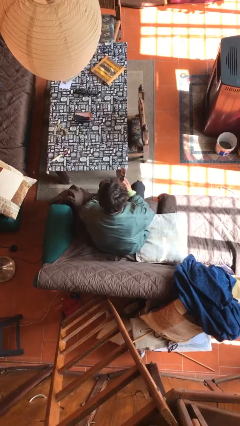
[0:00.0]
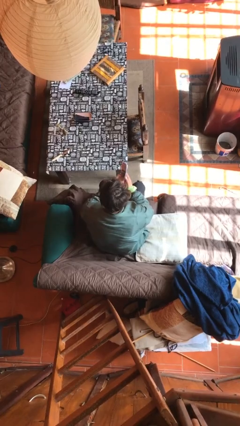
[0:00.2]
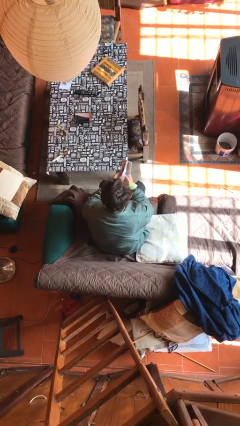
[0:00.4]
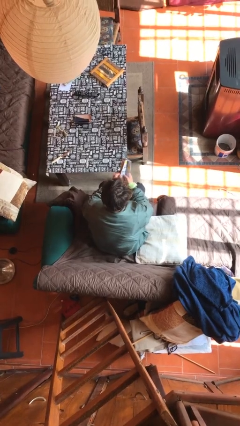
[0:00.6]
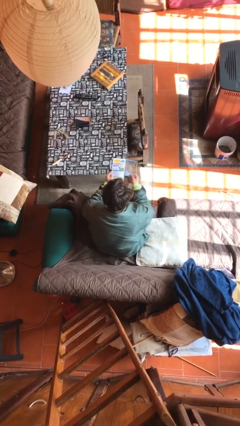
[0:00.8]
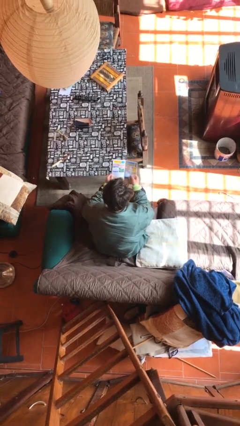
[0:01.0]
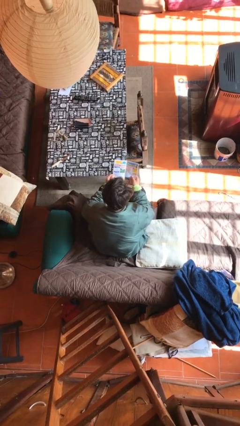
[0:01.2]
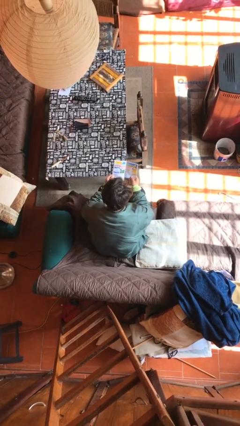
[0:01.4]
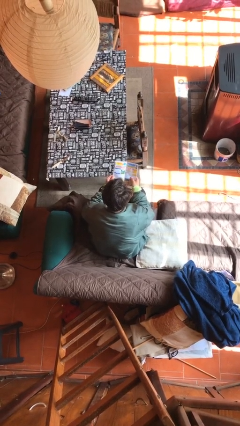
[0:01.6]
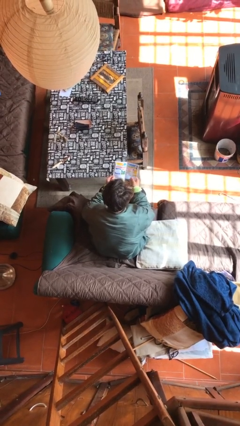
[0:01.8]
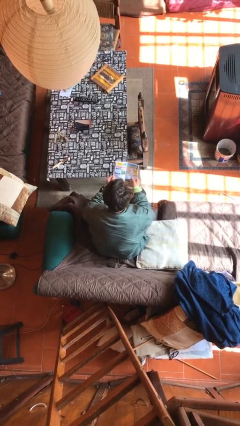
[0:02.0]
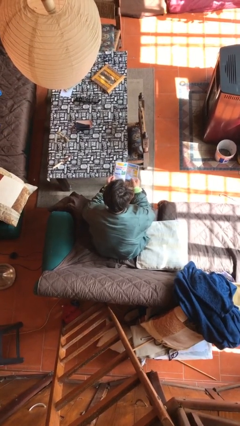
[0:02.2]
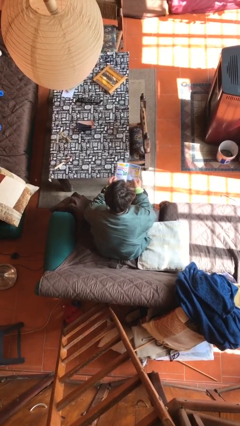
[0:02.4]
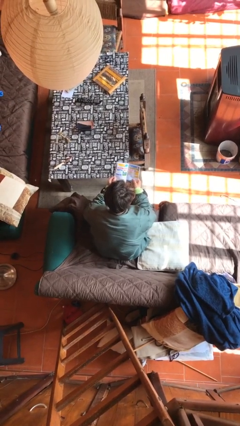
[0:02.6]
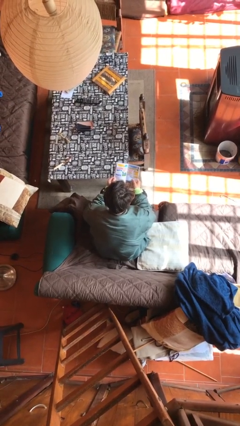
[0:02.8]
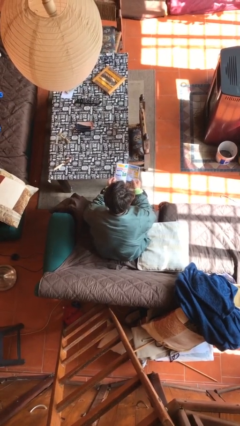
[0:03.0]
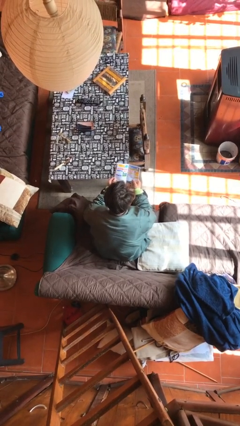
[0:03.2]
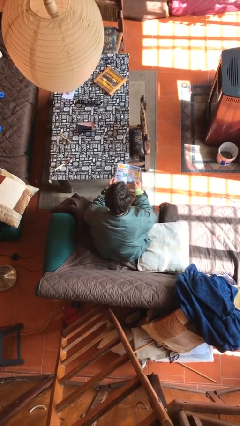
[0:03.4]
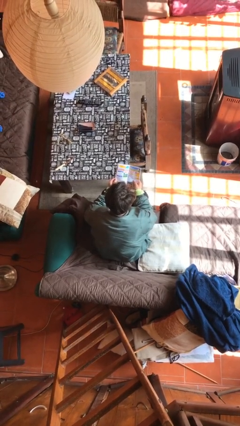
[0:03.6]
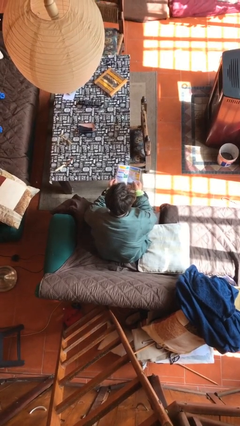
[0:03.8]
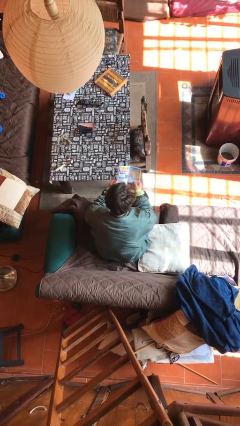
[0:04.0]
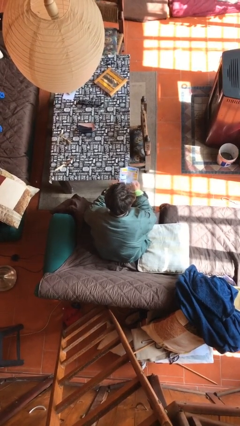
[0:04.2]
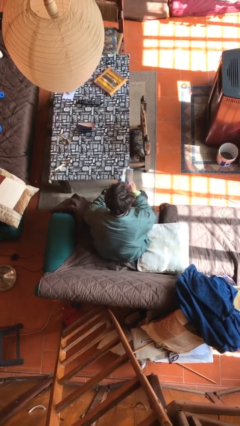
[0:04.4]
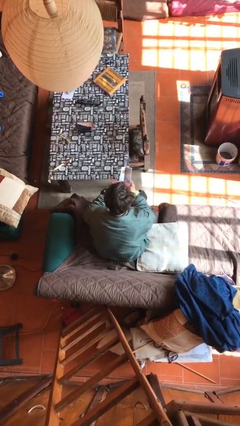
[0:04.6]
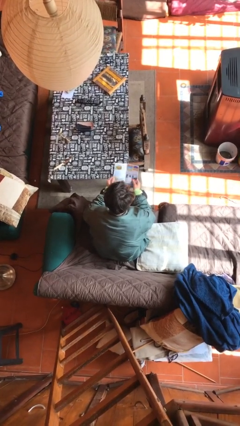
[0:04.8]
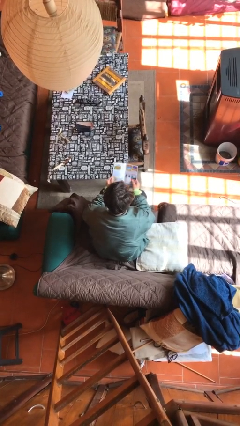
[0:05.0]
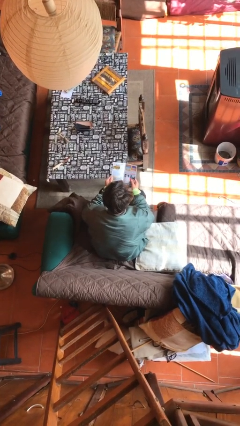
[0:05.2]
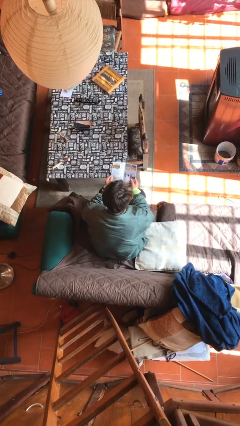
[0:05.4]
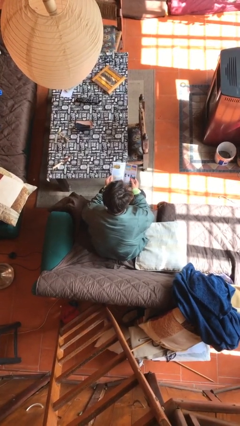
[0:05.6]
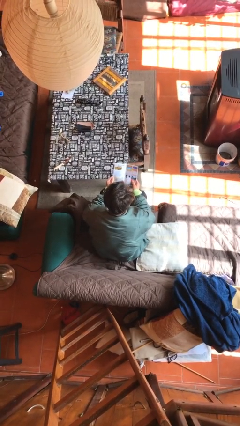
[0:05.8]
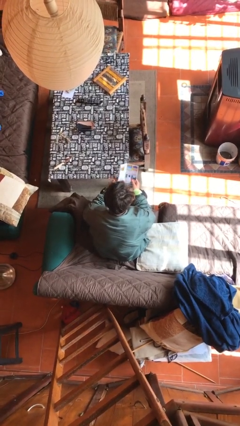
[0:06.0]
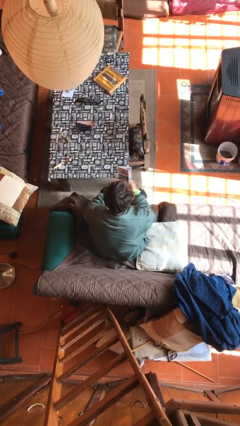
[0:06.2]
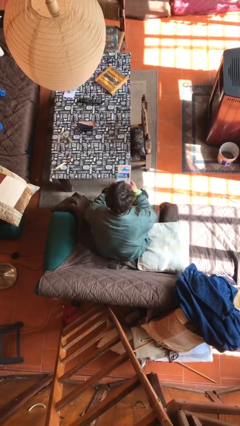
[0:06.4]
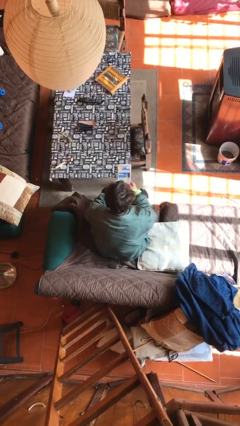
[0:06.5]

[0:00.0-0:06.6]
person reads document

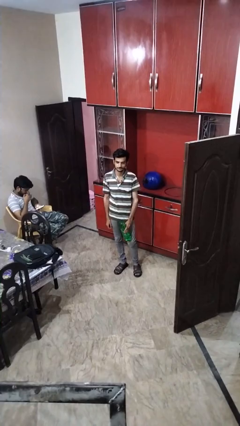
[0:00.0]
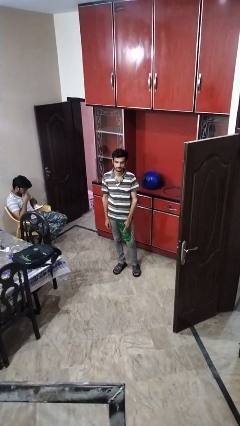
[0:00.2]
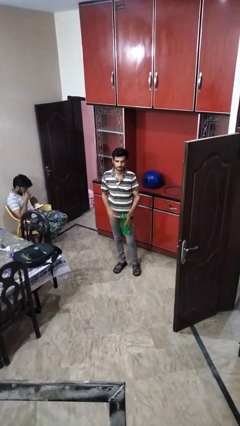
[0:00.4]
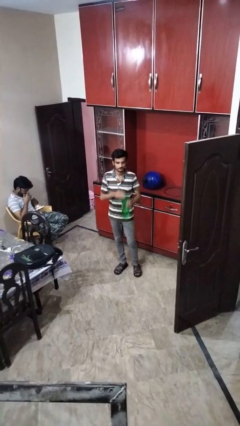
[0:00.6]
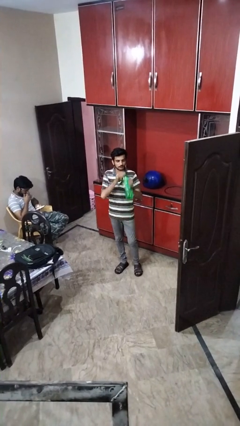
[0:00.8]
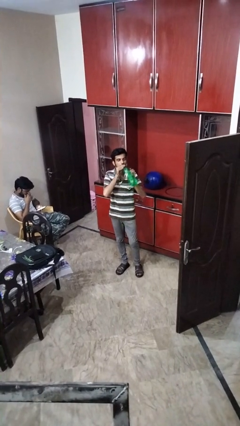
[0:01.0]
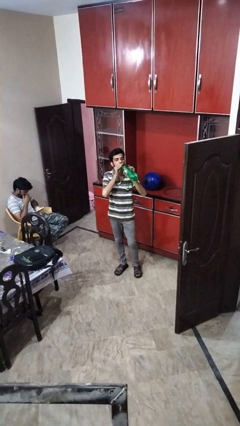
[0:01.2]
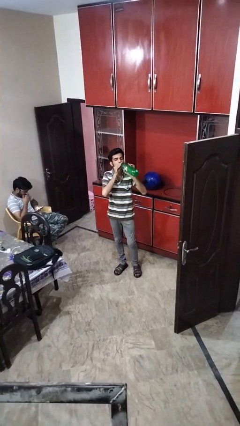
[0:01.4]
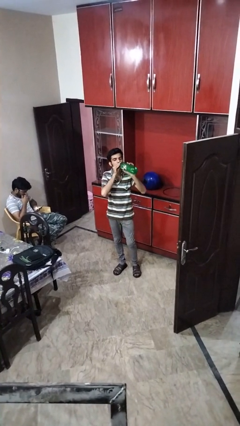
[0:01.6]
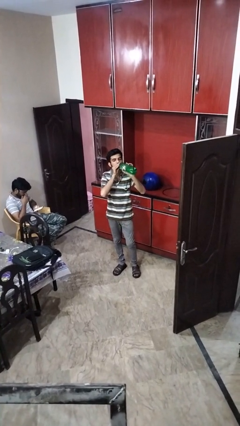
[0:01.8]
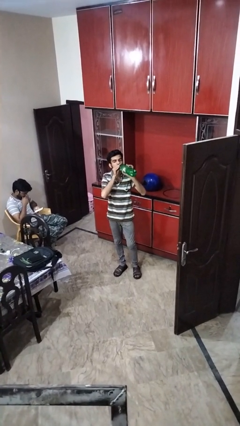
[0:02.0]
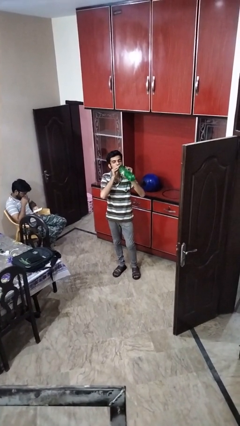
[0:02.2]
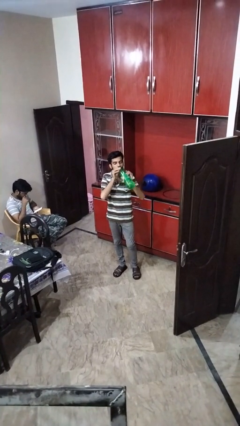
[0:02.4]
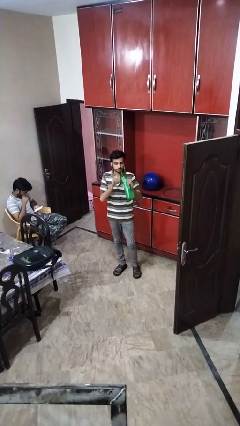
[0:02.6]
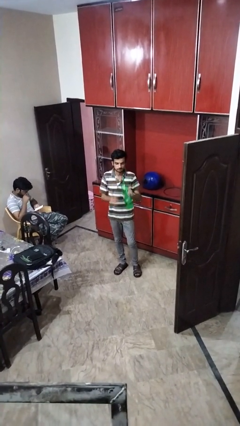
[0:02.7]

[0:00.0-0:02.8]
person drinks from bottle

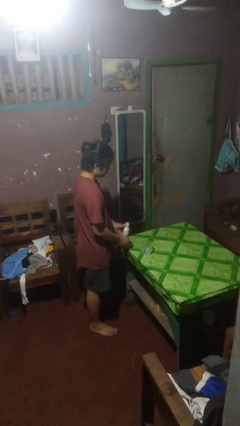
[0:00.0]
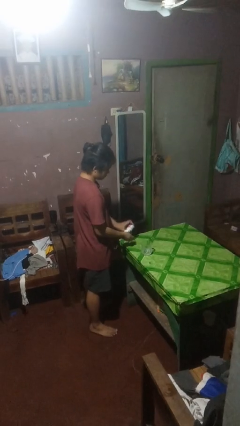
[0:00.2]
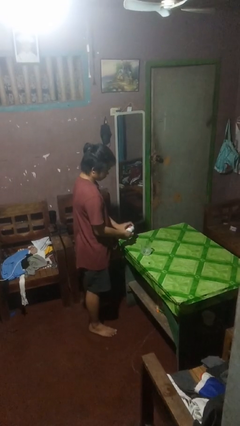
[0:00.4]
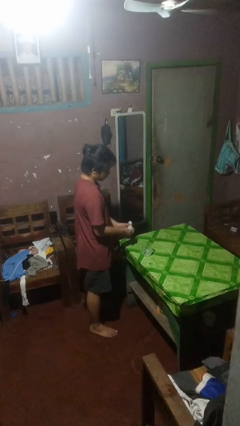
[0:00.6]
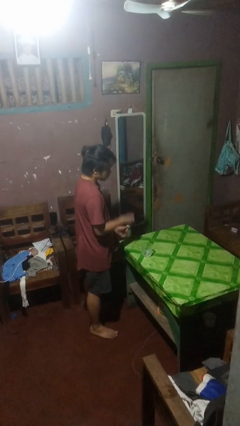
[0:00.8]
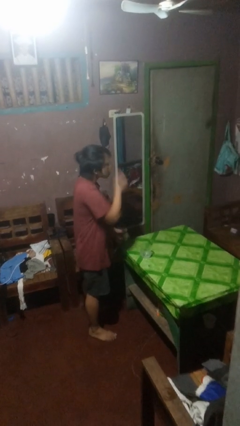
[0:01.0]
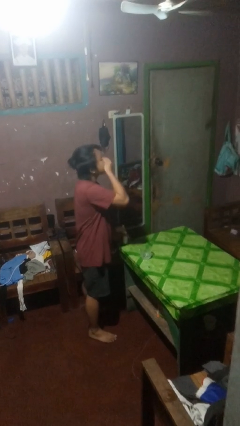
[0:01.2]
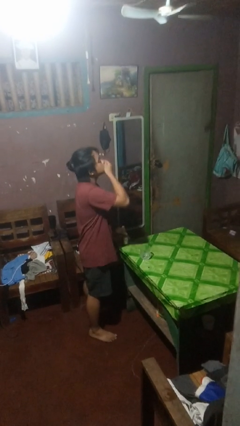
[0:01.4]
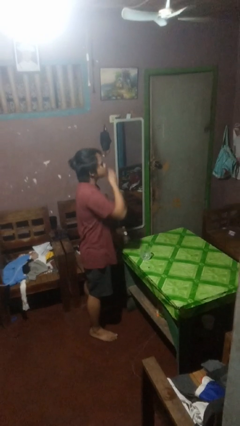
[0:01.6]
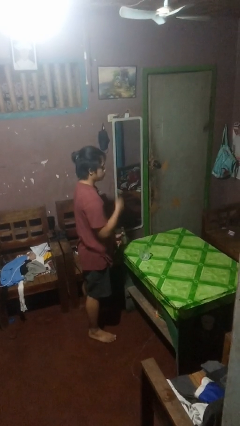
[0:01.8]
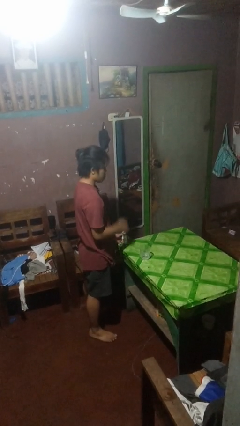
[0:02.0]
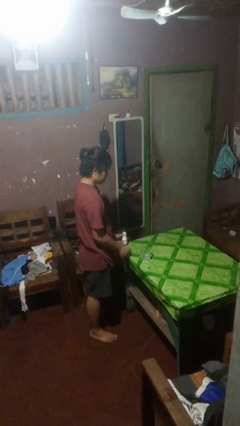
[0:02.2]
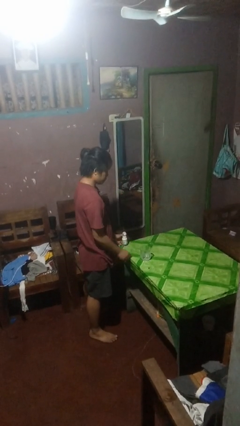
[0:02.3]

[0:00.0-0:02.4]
person takes medicine pills

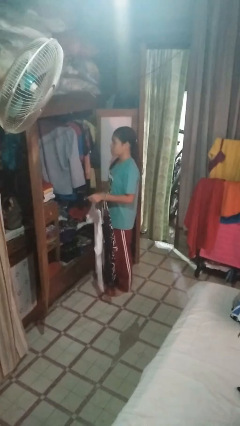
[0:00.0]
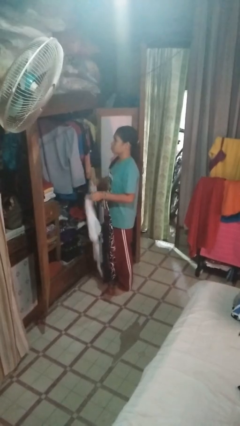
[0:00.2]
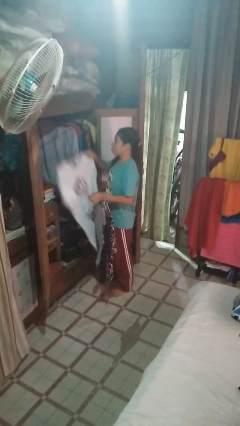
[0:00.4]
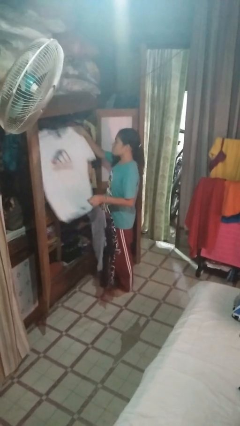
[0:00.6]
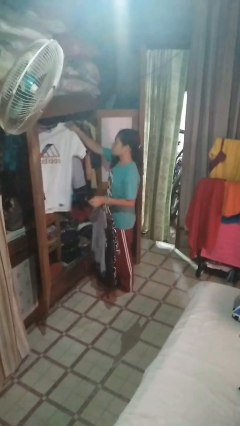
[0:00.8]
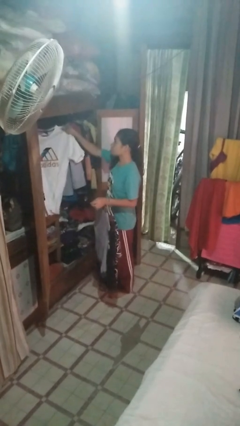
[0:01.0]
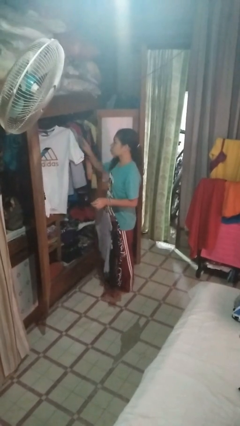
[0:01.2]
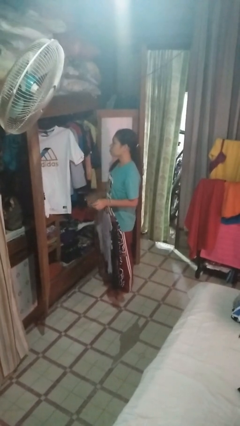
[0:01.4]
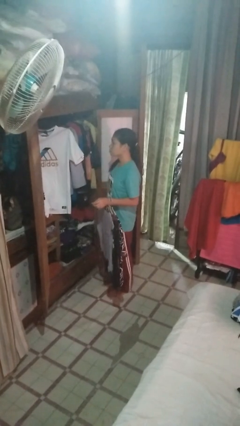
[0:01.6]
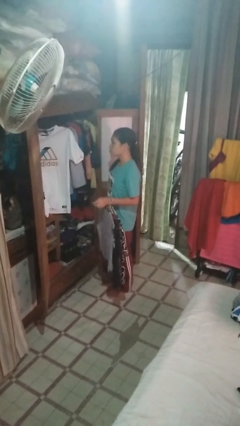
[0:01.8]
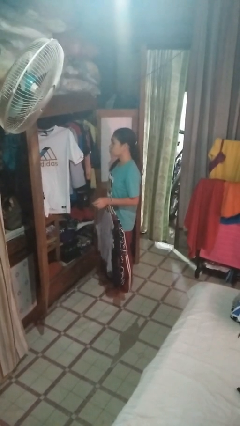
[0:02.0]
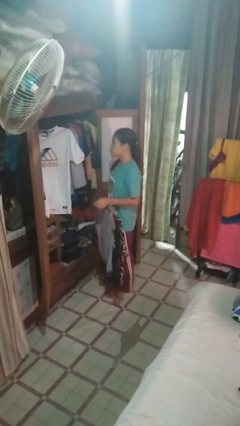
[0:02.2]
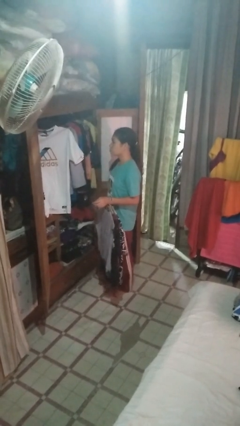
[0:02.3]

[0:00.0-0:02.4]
person puts clothes into closet

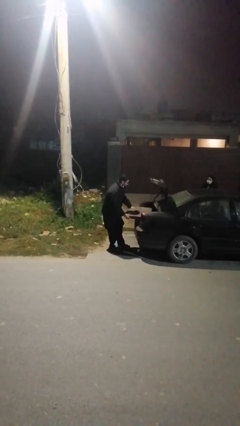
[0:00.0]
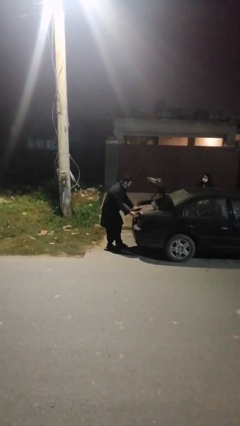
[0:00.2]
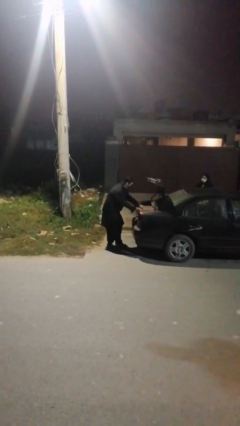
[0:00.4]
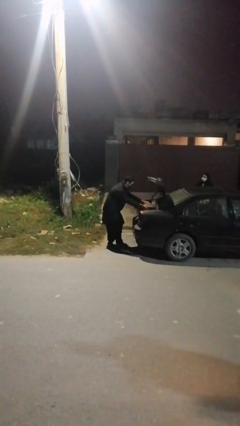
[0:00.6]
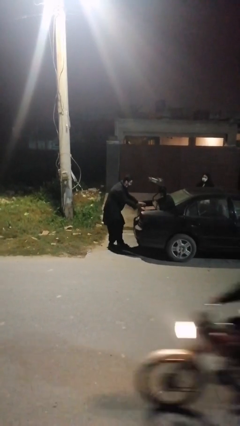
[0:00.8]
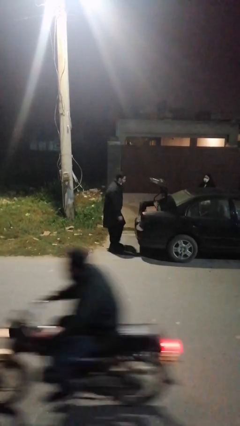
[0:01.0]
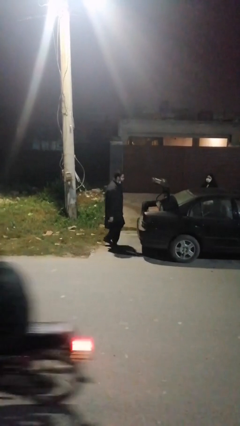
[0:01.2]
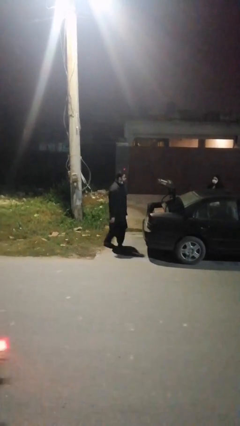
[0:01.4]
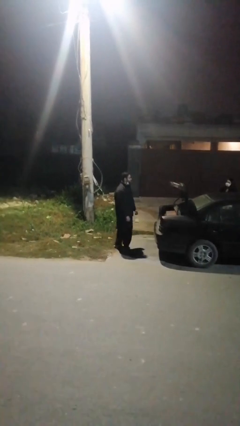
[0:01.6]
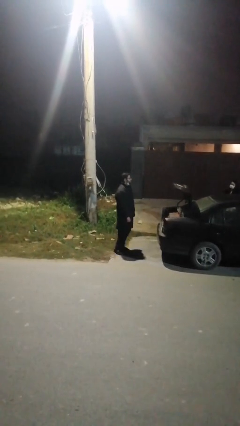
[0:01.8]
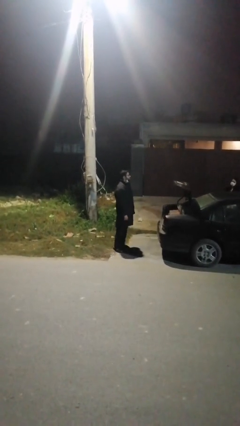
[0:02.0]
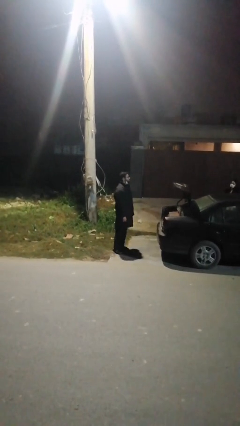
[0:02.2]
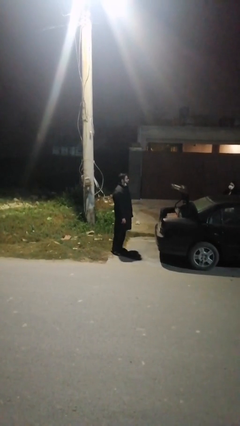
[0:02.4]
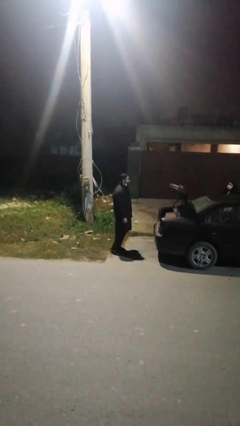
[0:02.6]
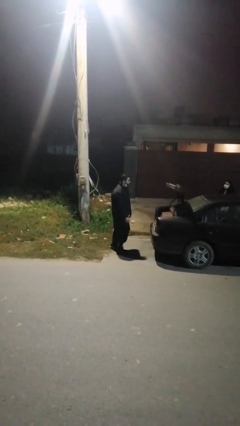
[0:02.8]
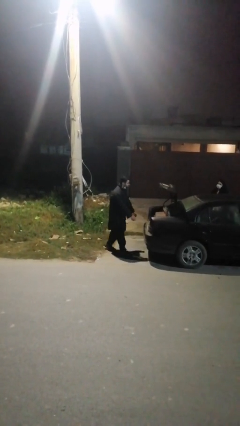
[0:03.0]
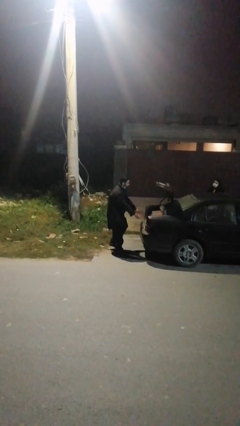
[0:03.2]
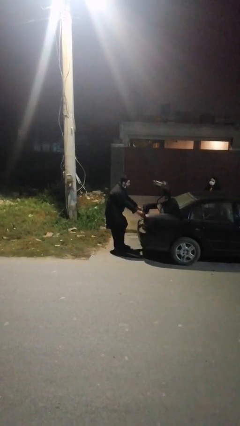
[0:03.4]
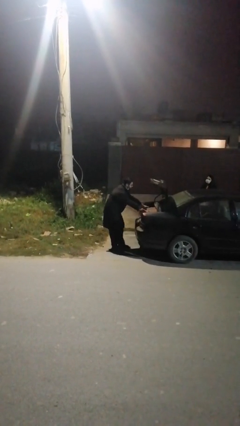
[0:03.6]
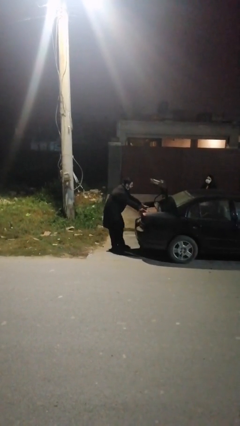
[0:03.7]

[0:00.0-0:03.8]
person loads car
